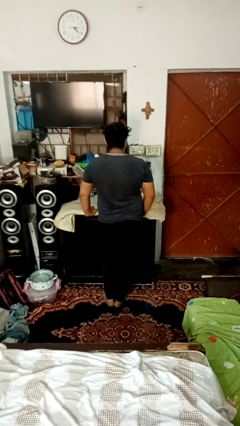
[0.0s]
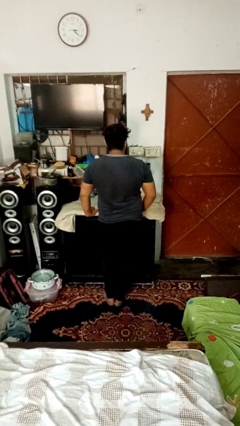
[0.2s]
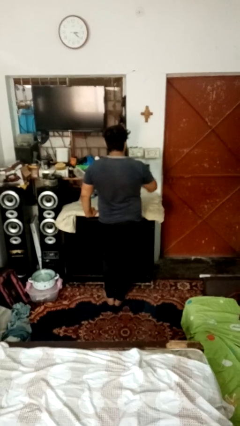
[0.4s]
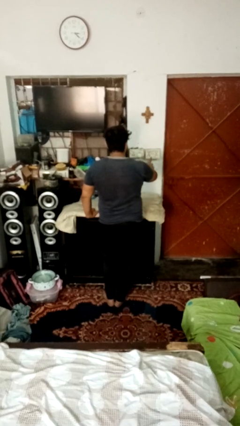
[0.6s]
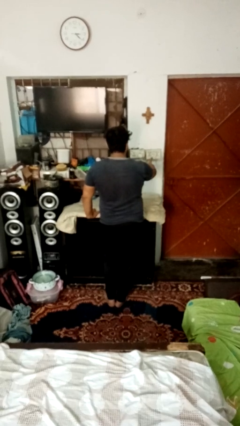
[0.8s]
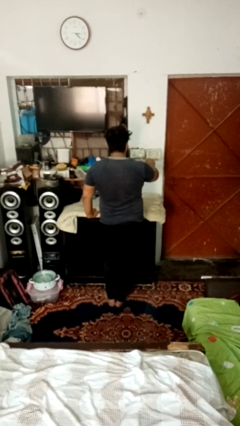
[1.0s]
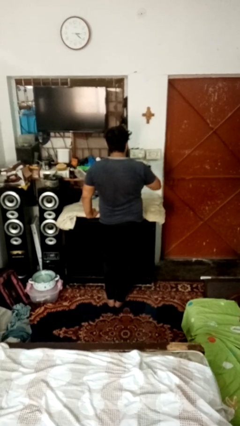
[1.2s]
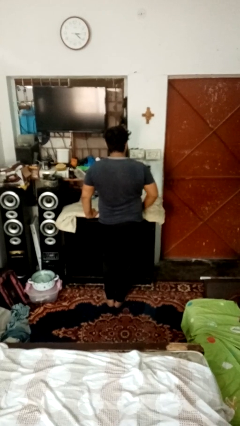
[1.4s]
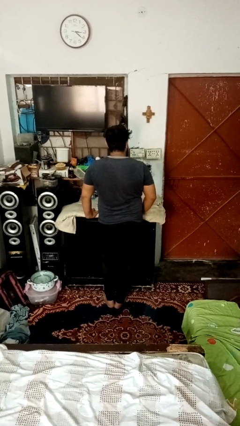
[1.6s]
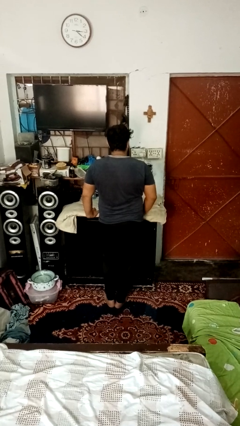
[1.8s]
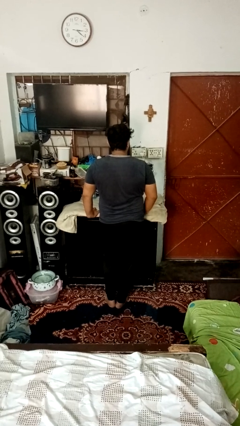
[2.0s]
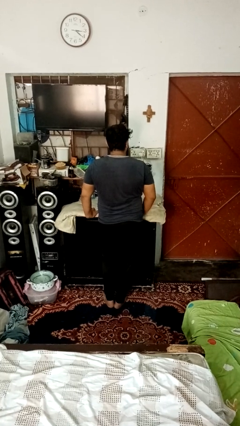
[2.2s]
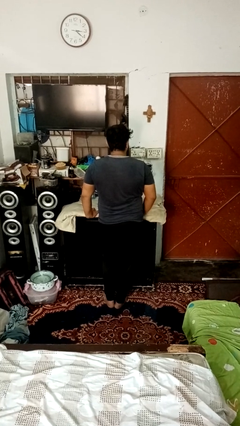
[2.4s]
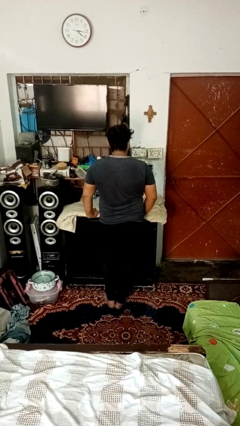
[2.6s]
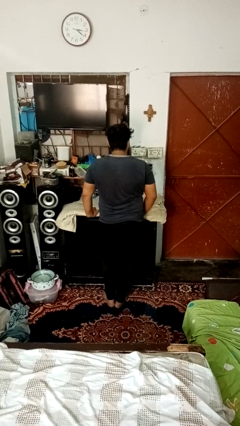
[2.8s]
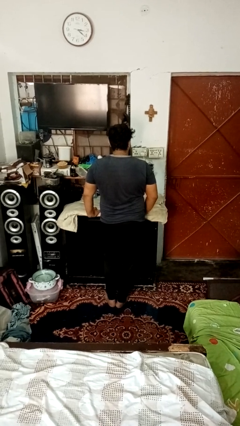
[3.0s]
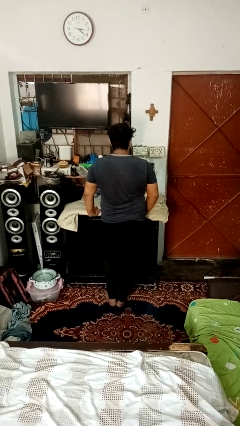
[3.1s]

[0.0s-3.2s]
person turns on fan

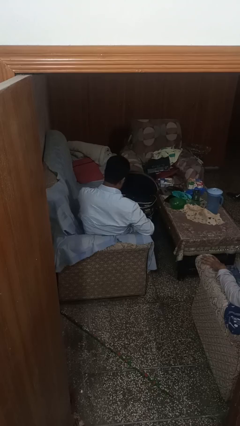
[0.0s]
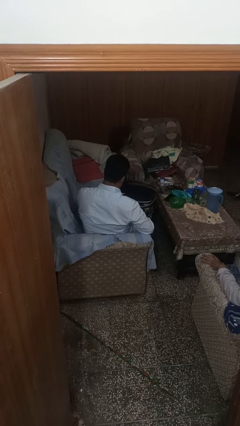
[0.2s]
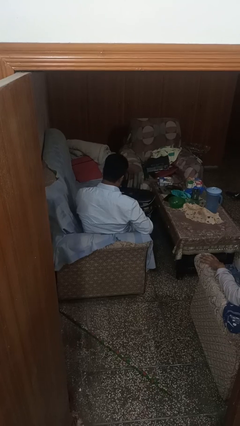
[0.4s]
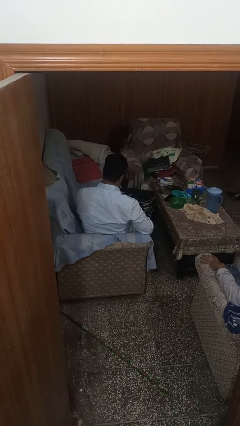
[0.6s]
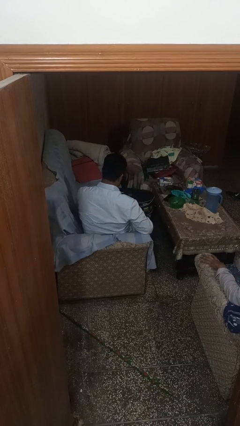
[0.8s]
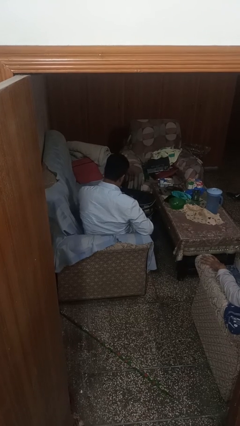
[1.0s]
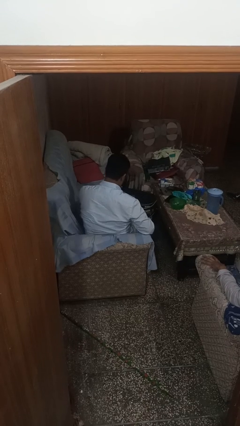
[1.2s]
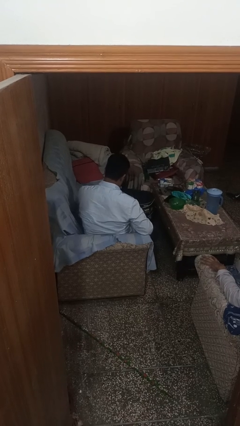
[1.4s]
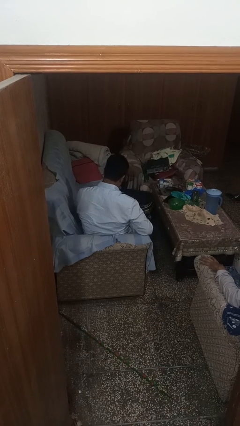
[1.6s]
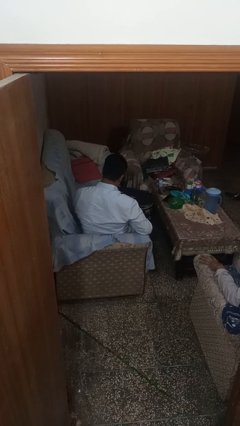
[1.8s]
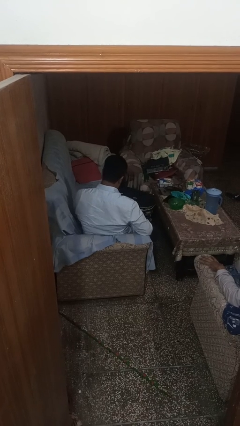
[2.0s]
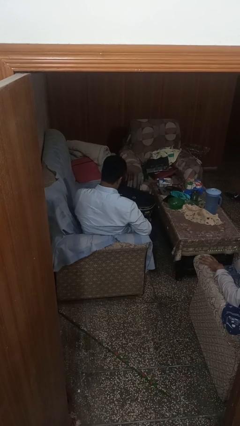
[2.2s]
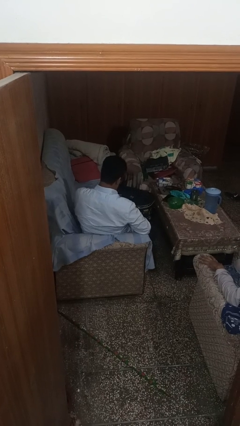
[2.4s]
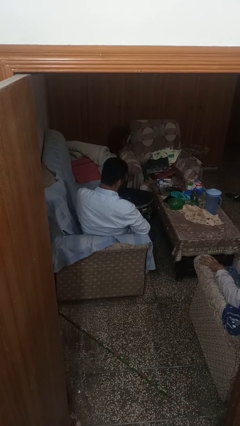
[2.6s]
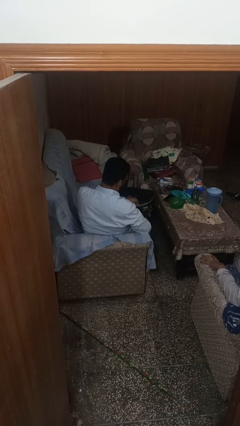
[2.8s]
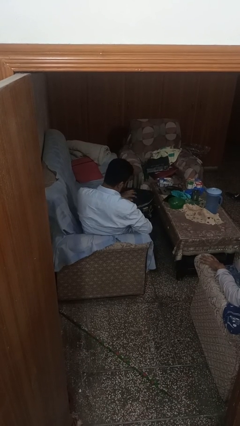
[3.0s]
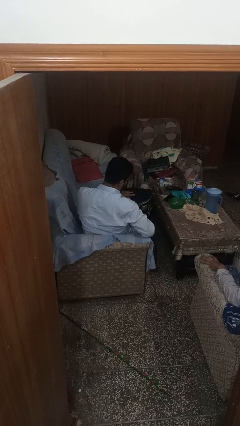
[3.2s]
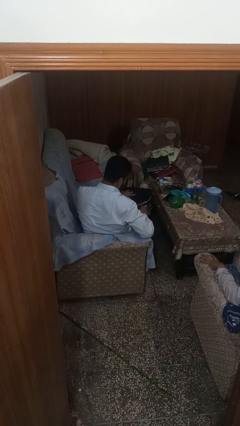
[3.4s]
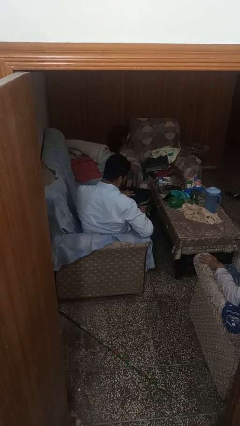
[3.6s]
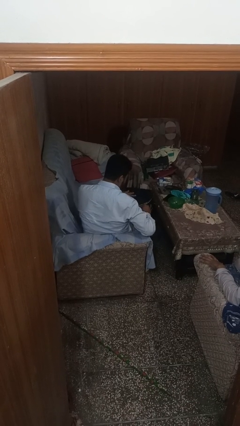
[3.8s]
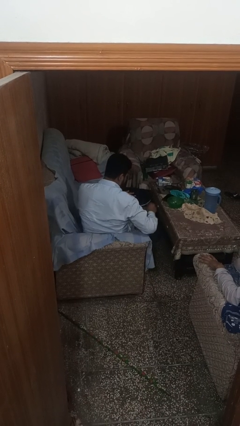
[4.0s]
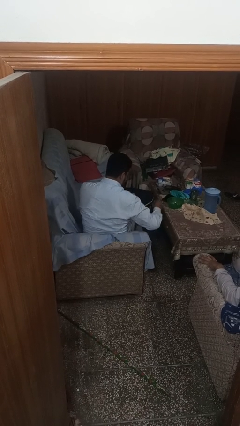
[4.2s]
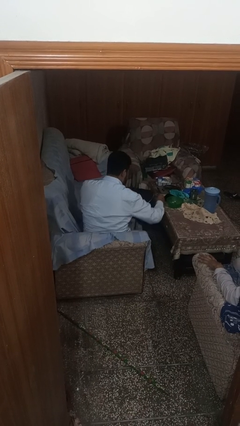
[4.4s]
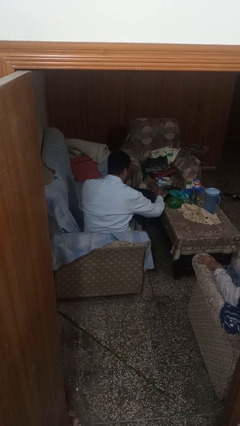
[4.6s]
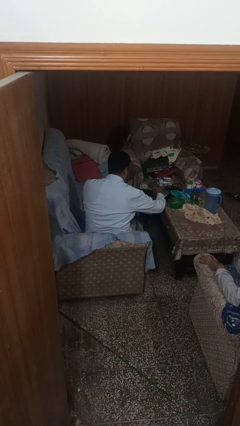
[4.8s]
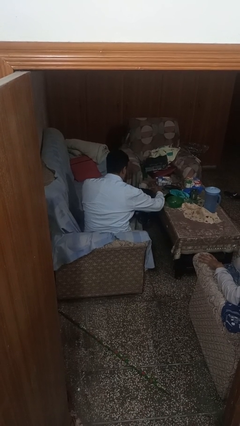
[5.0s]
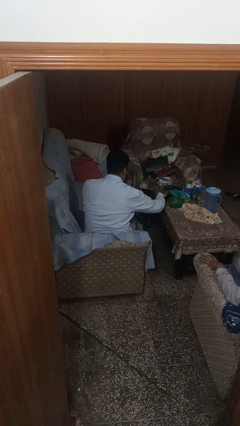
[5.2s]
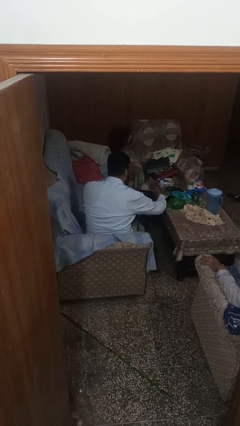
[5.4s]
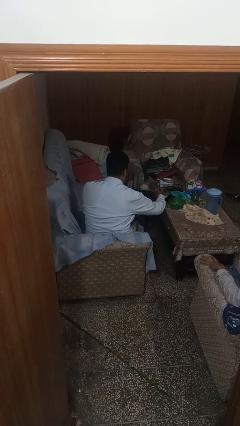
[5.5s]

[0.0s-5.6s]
person closes suitcase

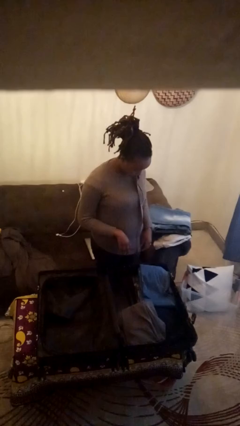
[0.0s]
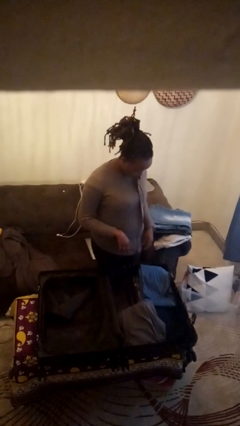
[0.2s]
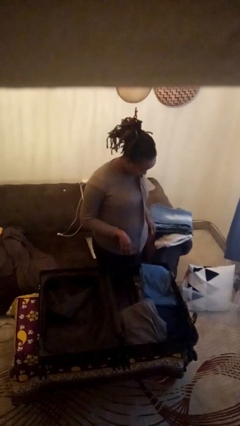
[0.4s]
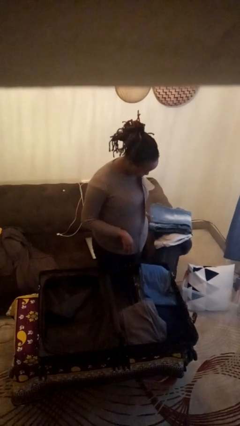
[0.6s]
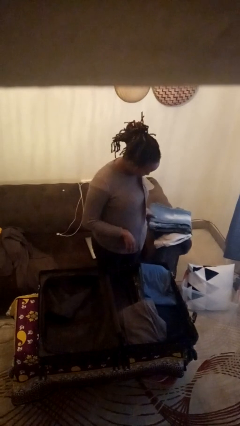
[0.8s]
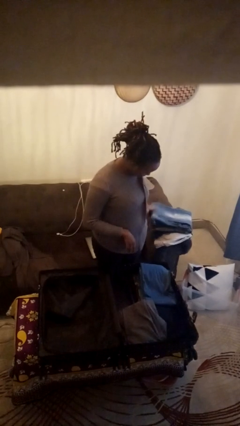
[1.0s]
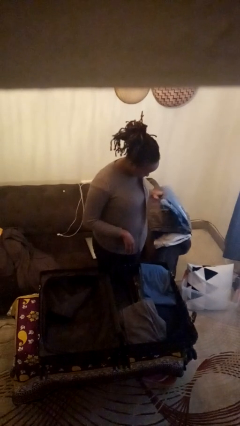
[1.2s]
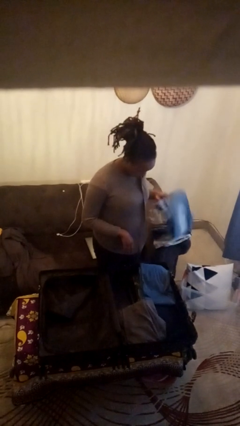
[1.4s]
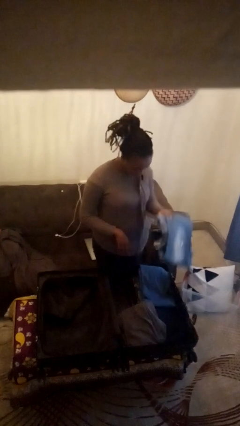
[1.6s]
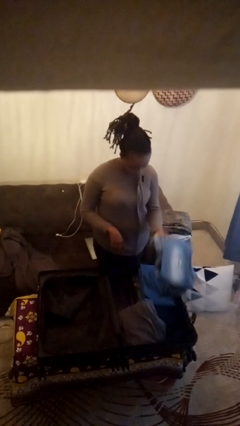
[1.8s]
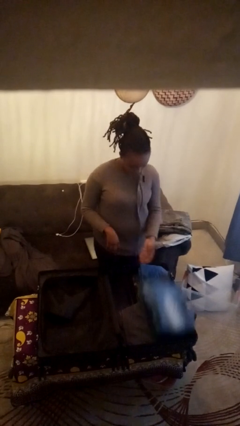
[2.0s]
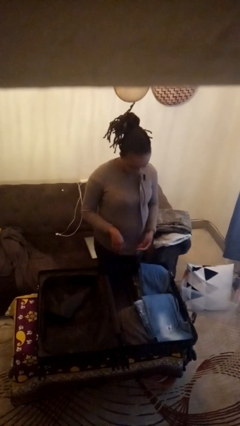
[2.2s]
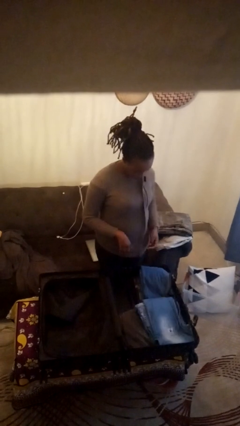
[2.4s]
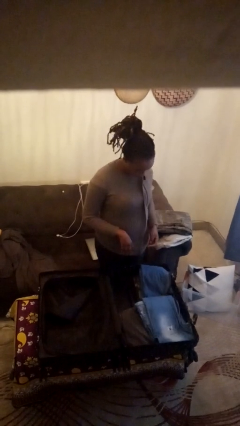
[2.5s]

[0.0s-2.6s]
person loads clothes into suitcase

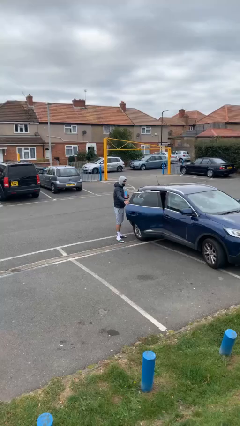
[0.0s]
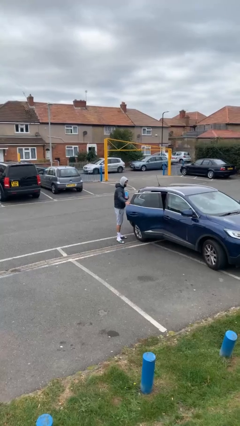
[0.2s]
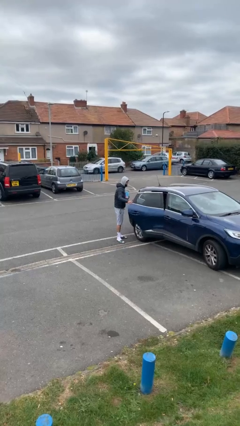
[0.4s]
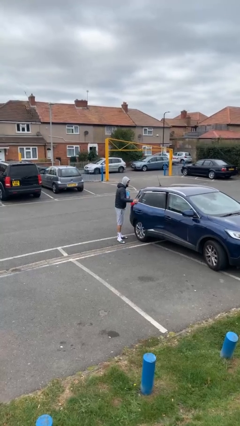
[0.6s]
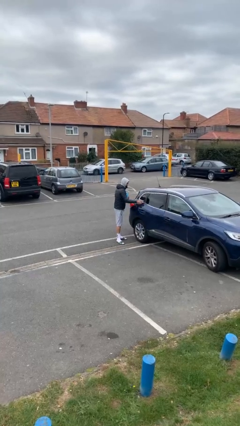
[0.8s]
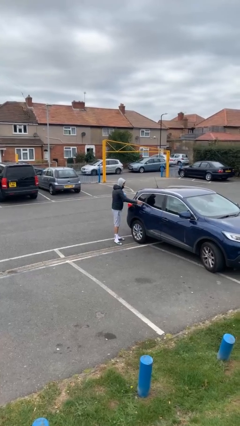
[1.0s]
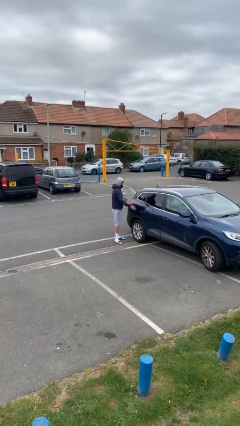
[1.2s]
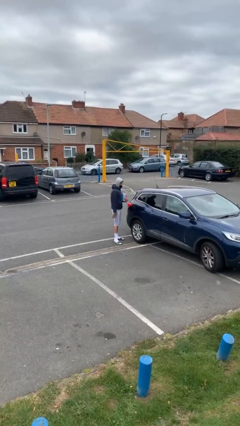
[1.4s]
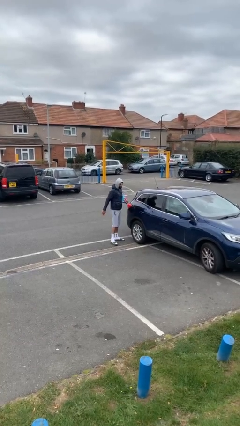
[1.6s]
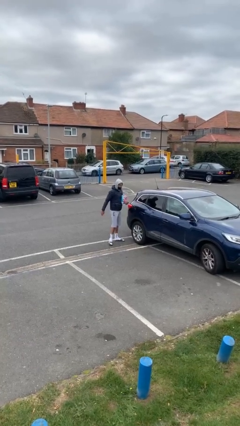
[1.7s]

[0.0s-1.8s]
person closes car door

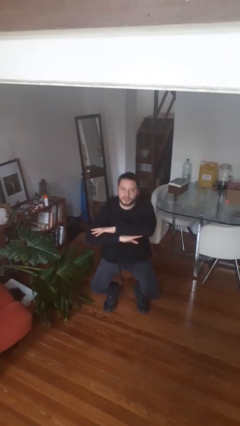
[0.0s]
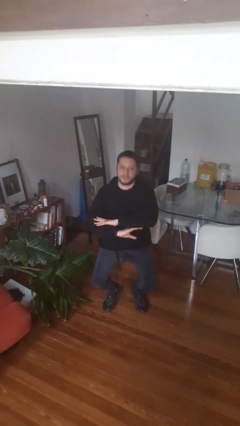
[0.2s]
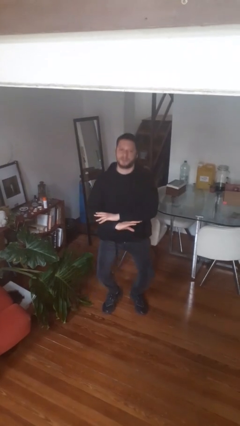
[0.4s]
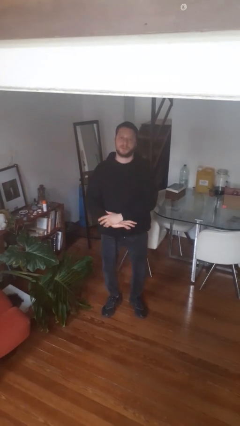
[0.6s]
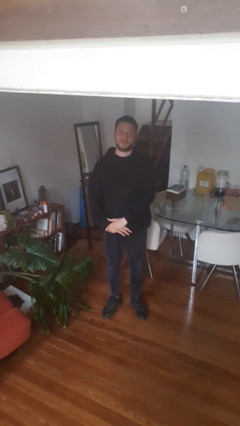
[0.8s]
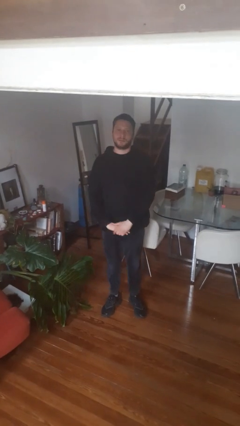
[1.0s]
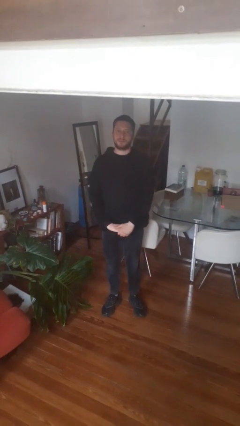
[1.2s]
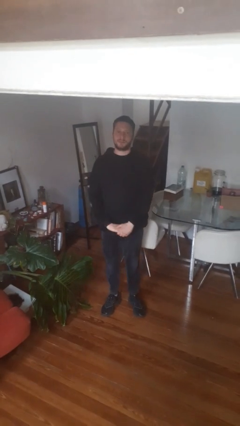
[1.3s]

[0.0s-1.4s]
person stands up

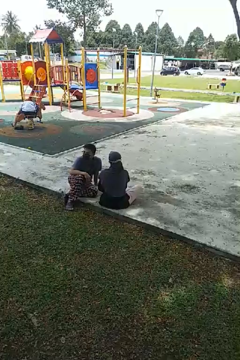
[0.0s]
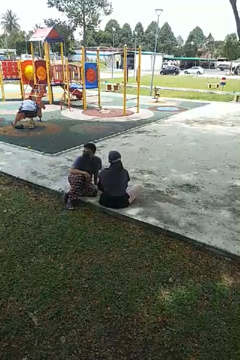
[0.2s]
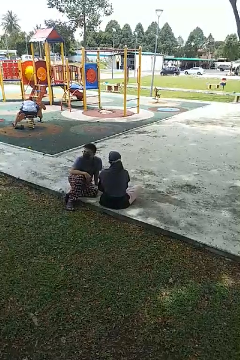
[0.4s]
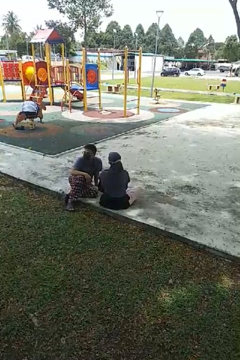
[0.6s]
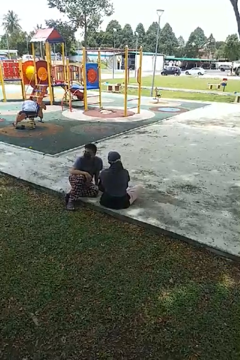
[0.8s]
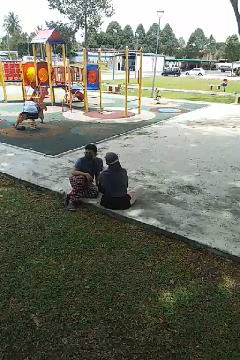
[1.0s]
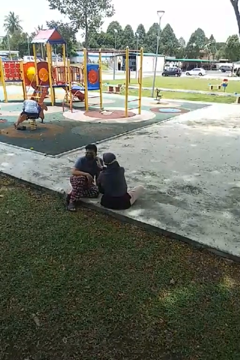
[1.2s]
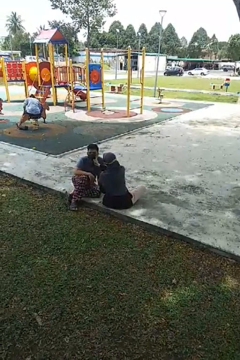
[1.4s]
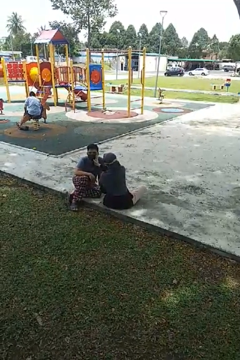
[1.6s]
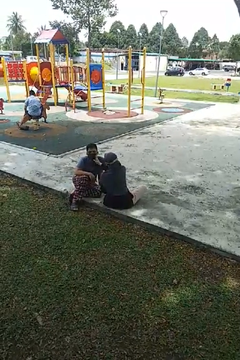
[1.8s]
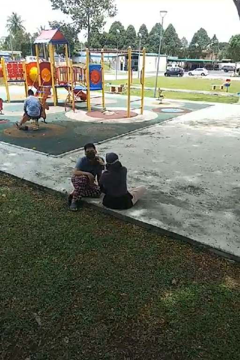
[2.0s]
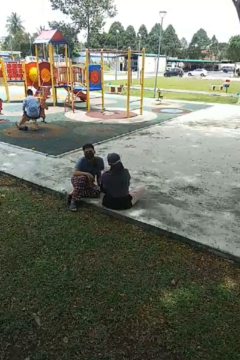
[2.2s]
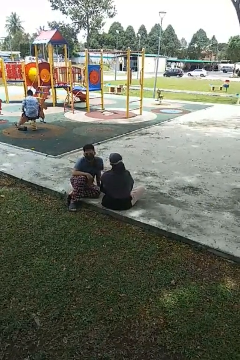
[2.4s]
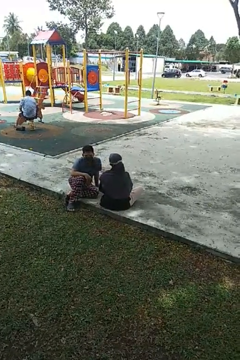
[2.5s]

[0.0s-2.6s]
person touches face of person

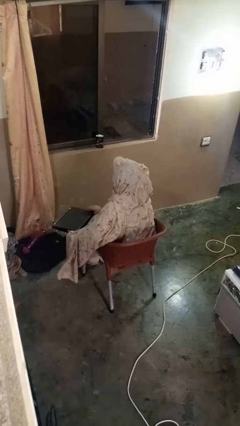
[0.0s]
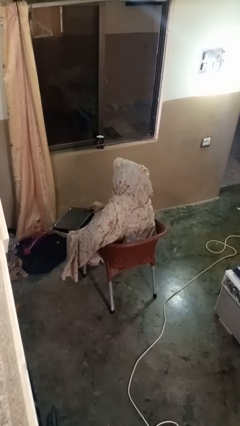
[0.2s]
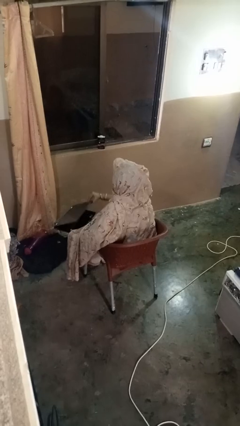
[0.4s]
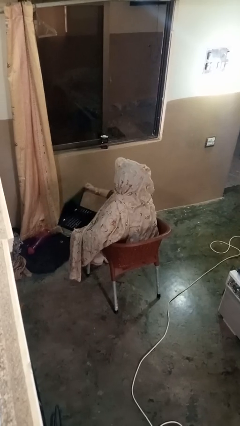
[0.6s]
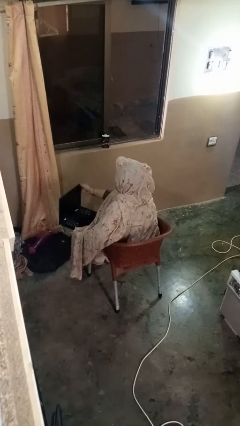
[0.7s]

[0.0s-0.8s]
person opens laptop
